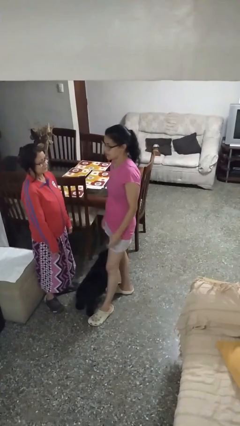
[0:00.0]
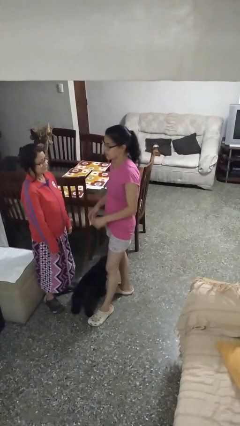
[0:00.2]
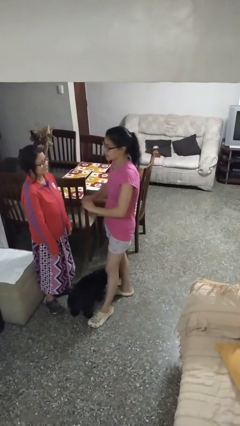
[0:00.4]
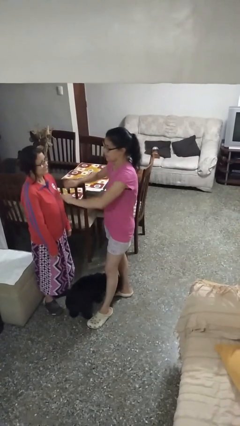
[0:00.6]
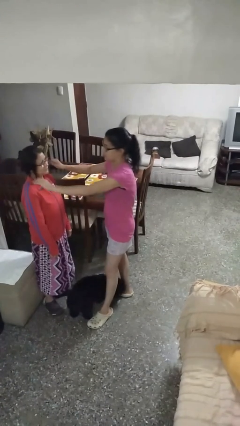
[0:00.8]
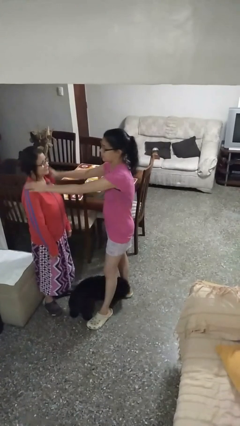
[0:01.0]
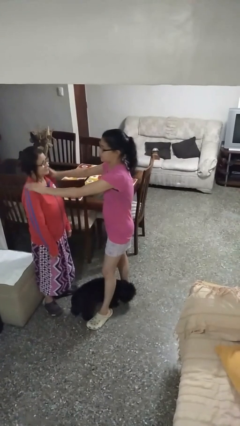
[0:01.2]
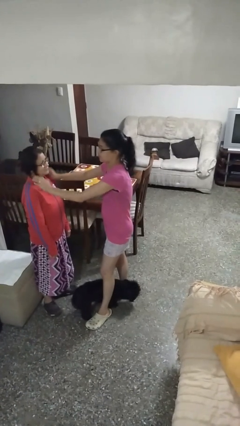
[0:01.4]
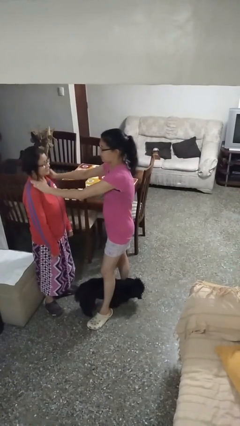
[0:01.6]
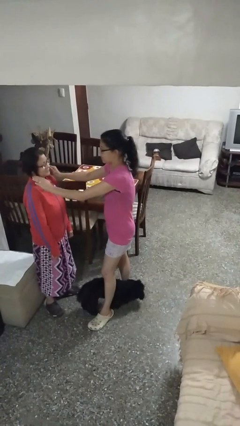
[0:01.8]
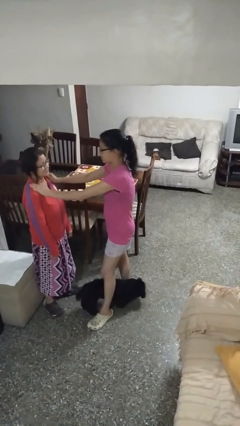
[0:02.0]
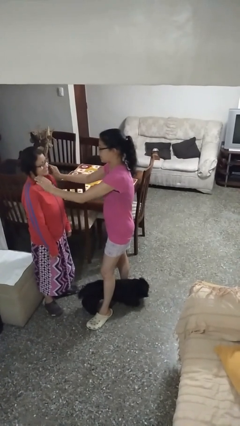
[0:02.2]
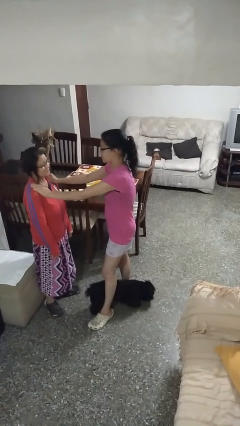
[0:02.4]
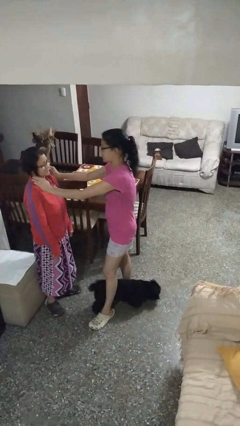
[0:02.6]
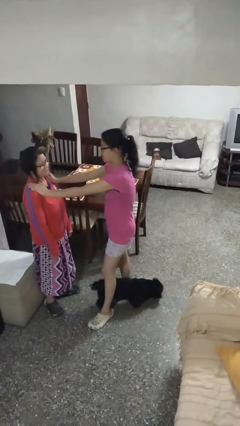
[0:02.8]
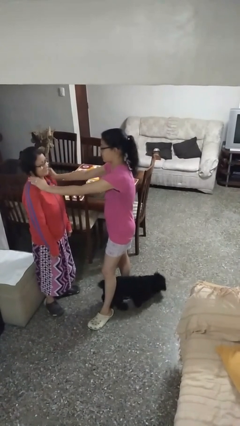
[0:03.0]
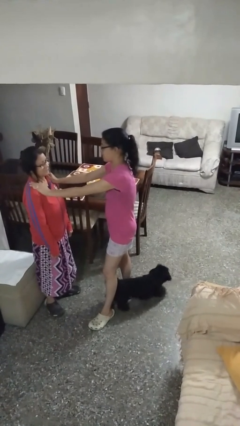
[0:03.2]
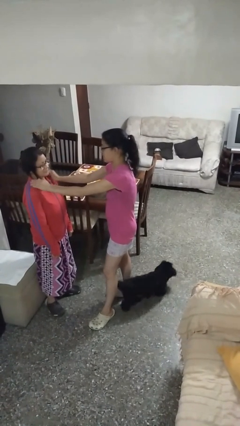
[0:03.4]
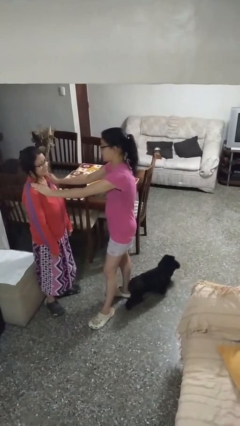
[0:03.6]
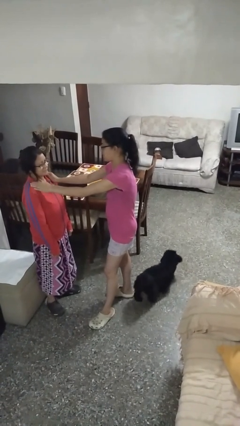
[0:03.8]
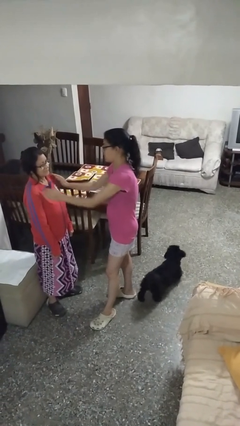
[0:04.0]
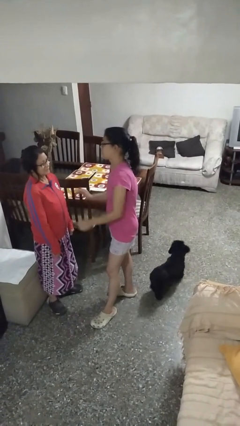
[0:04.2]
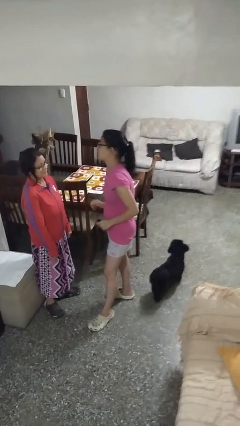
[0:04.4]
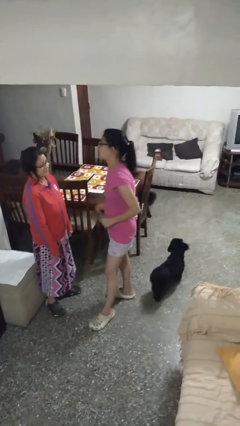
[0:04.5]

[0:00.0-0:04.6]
person pounds shoulders of person

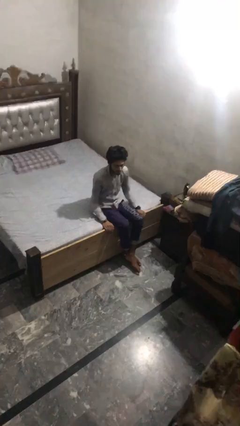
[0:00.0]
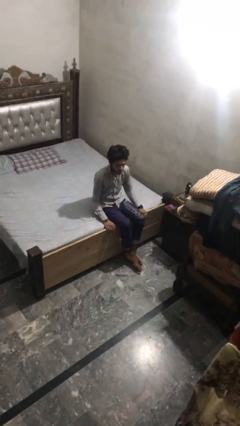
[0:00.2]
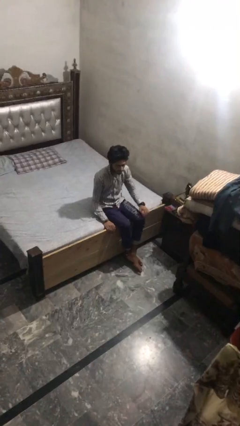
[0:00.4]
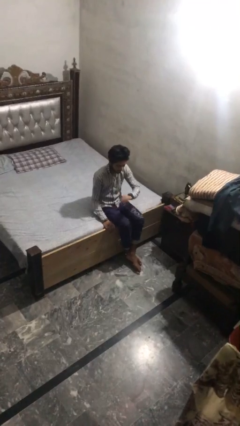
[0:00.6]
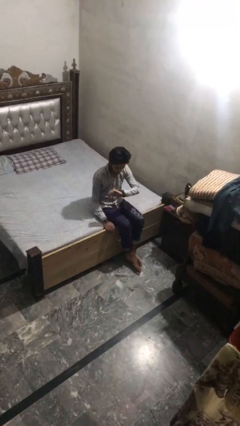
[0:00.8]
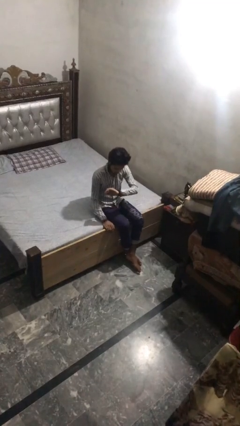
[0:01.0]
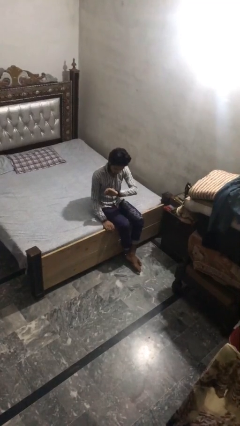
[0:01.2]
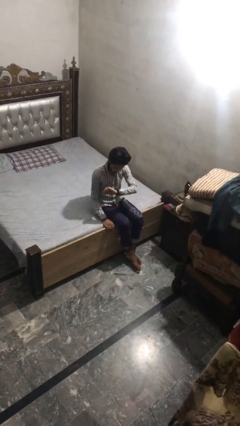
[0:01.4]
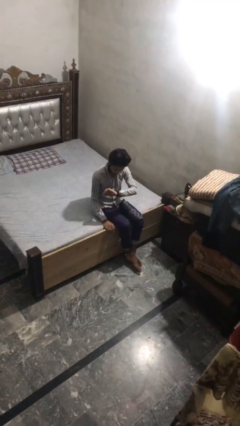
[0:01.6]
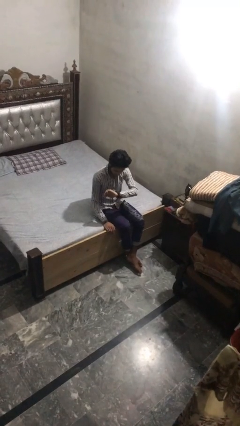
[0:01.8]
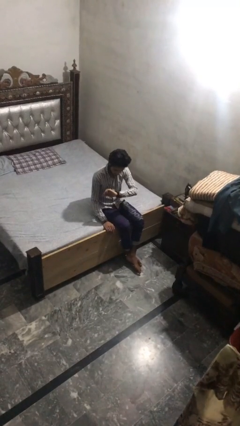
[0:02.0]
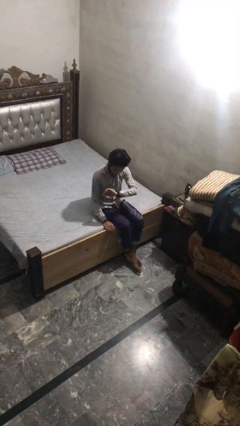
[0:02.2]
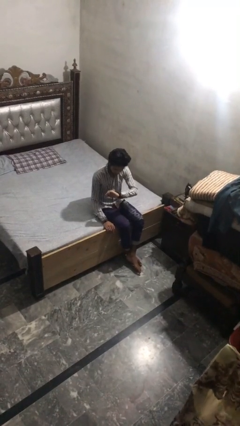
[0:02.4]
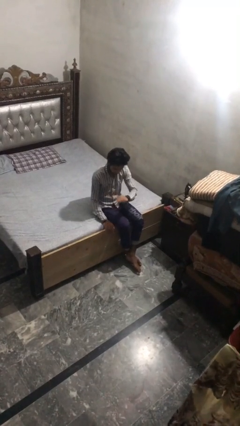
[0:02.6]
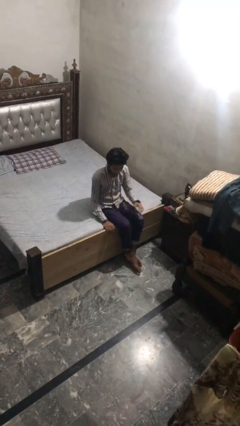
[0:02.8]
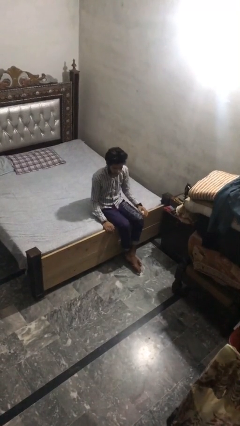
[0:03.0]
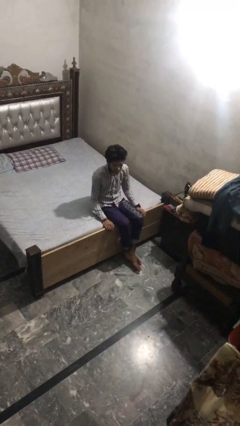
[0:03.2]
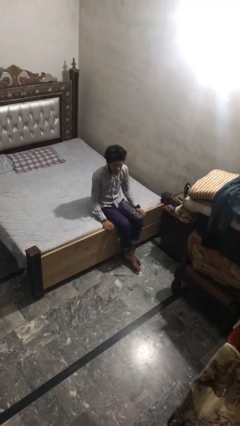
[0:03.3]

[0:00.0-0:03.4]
person looks at wristwatch

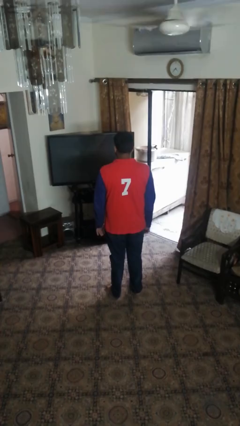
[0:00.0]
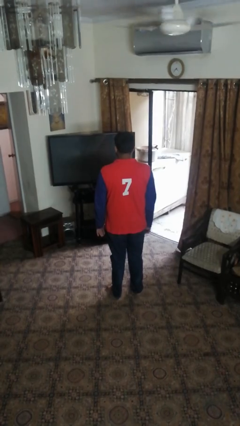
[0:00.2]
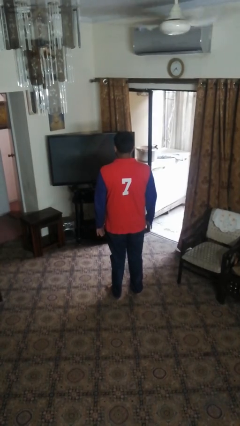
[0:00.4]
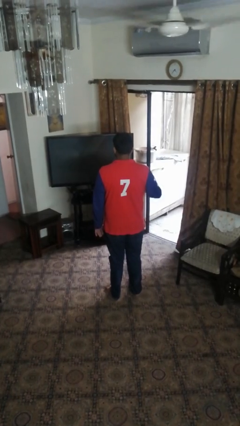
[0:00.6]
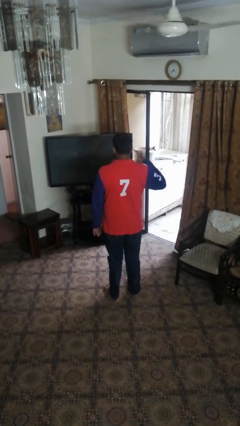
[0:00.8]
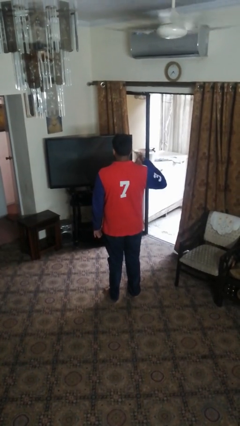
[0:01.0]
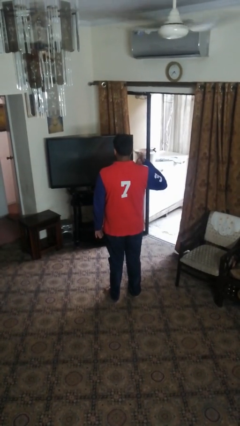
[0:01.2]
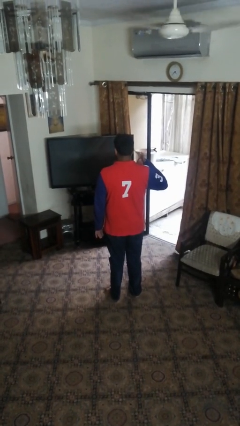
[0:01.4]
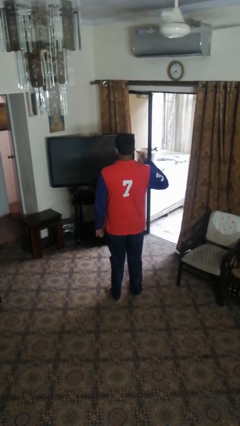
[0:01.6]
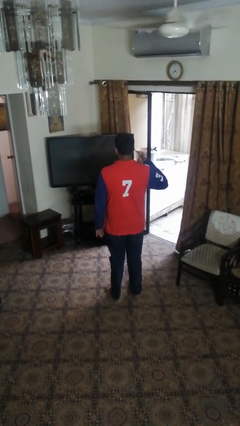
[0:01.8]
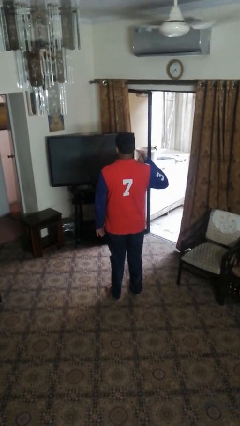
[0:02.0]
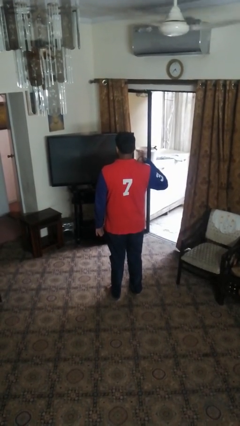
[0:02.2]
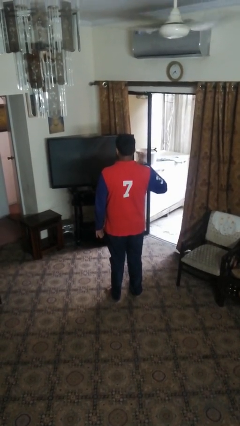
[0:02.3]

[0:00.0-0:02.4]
person gestures hang loose

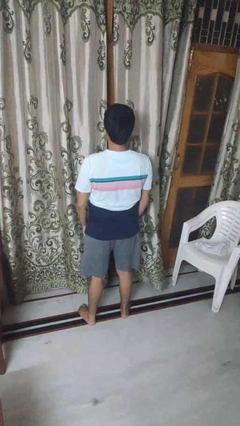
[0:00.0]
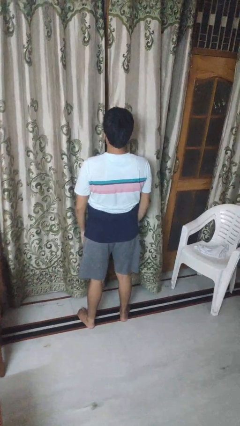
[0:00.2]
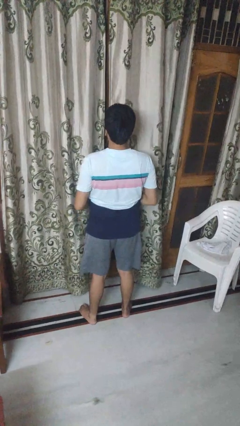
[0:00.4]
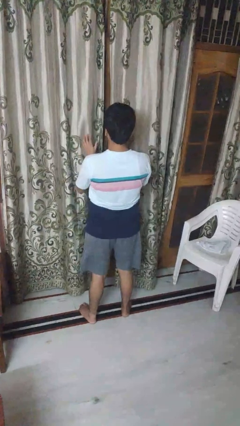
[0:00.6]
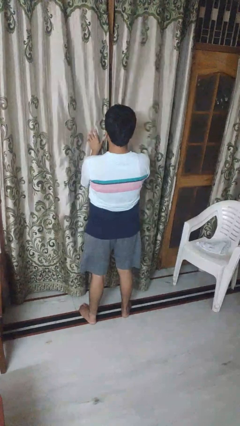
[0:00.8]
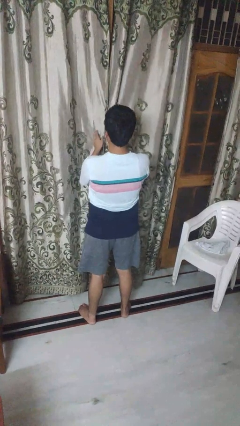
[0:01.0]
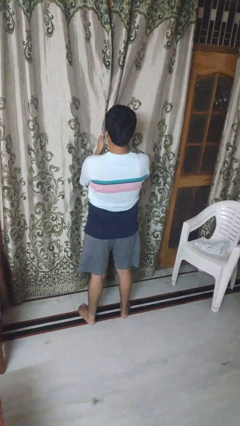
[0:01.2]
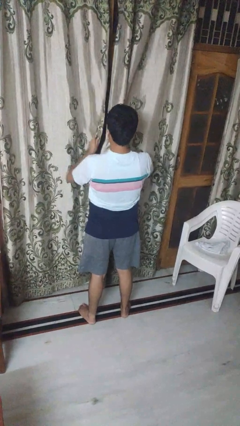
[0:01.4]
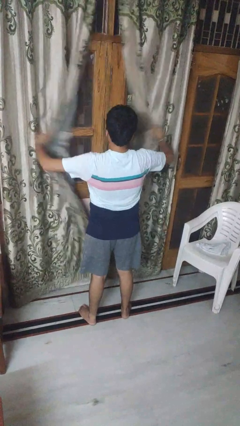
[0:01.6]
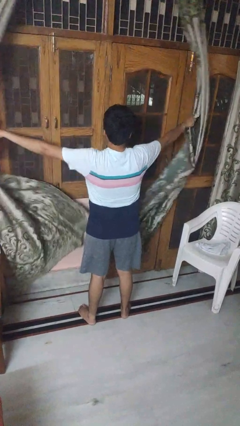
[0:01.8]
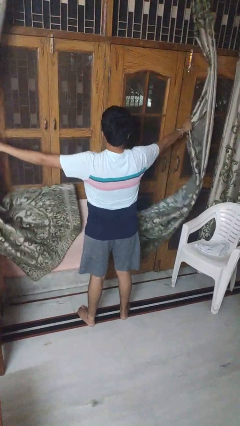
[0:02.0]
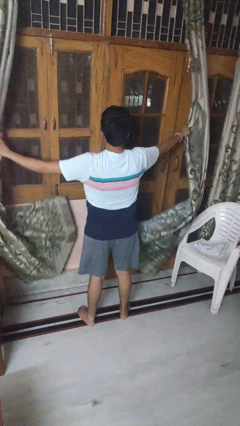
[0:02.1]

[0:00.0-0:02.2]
person opens curtains

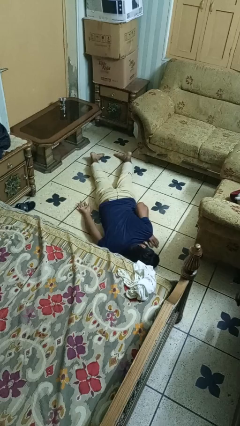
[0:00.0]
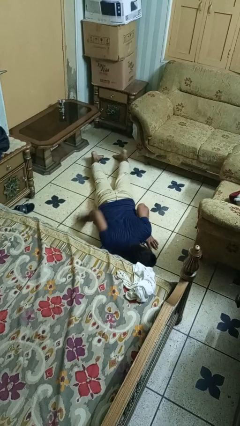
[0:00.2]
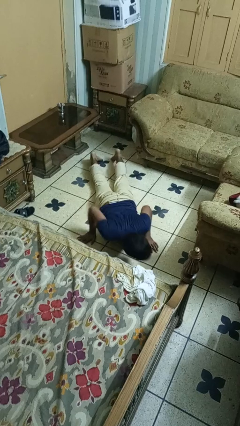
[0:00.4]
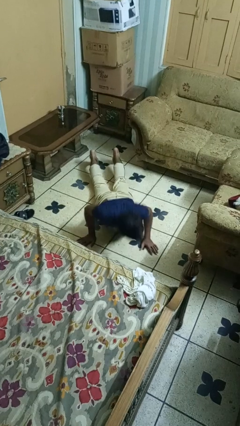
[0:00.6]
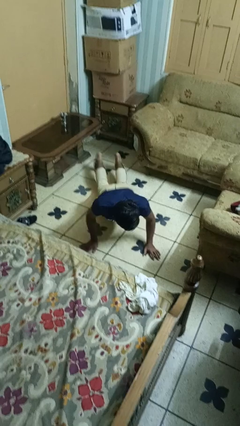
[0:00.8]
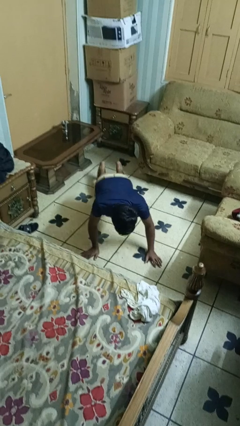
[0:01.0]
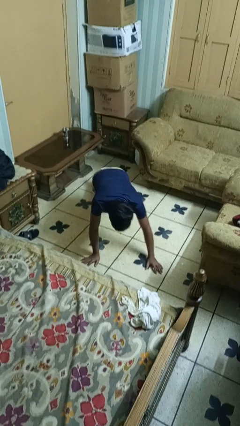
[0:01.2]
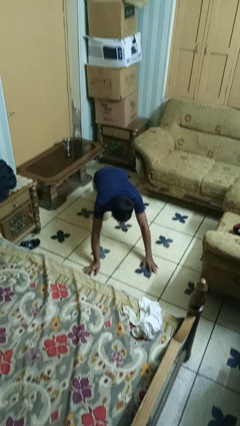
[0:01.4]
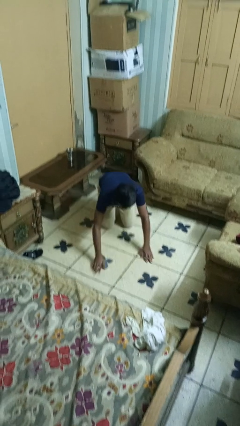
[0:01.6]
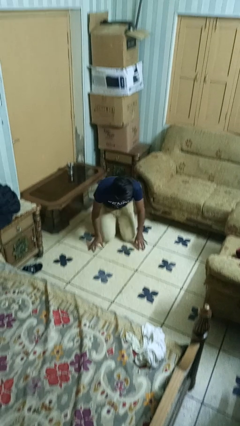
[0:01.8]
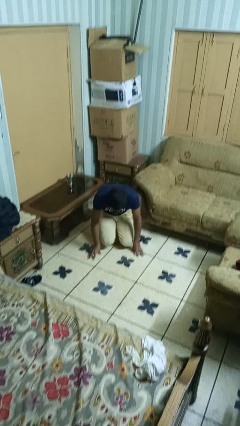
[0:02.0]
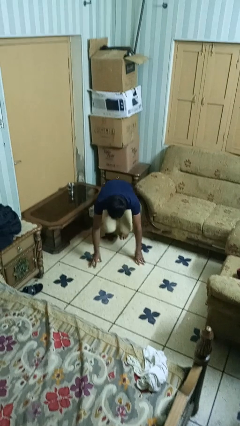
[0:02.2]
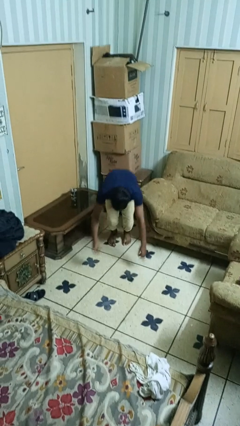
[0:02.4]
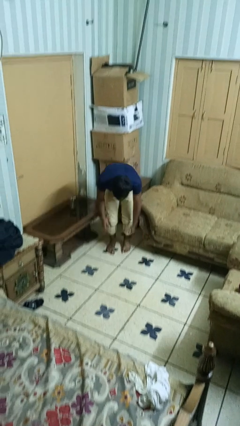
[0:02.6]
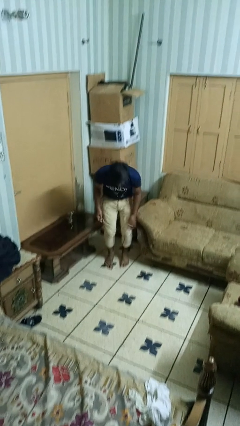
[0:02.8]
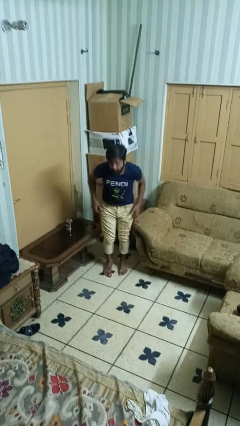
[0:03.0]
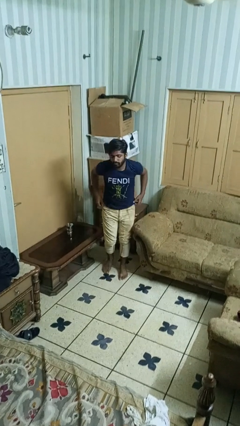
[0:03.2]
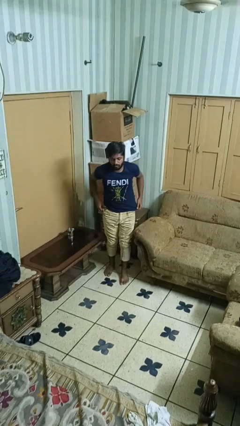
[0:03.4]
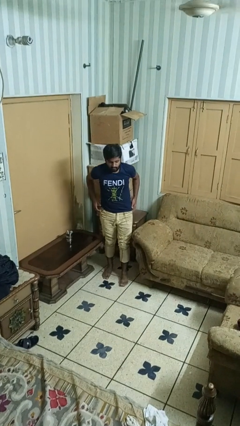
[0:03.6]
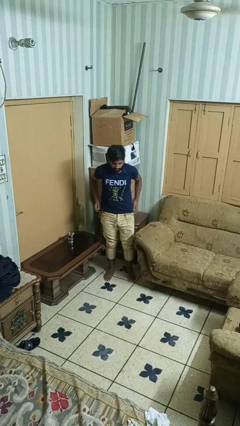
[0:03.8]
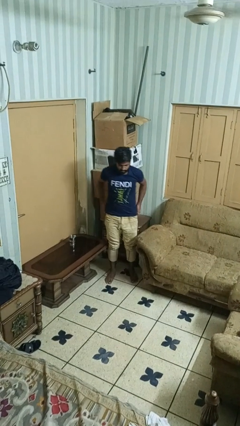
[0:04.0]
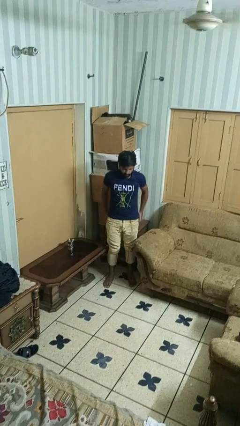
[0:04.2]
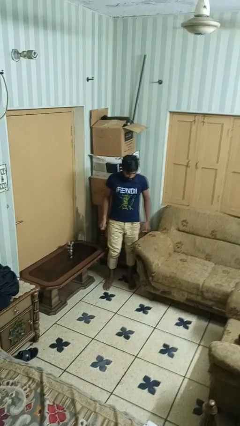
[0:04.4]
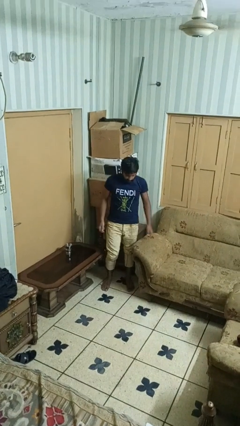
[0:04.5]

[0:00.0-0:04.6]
person stands up from floor
